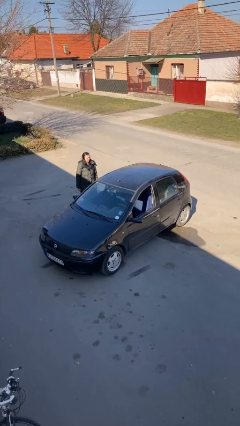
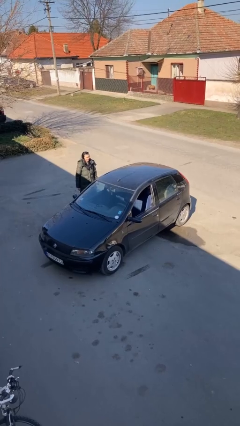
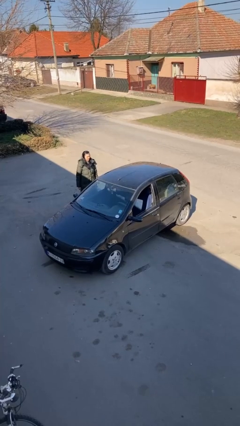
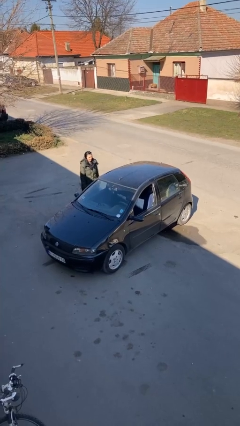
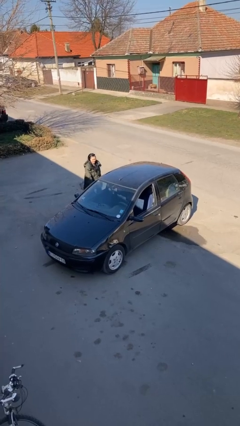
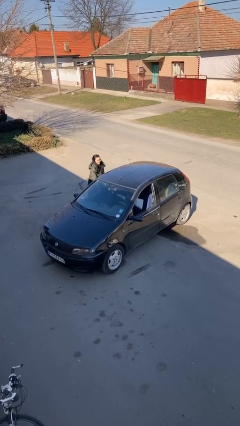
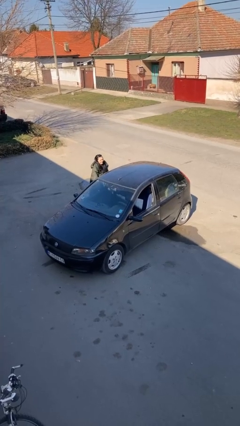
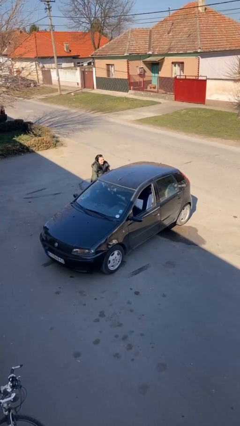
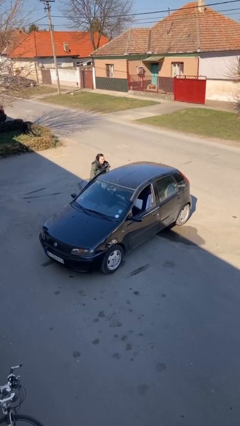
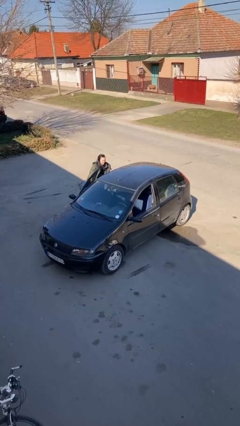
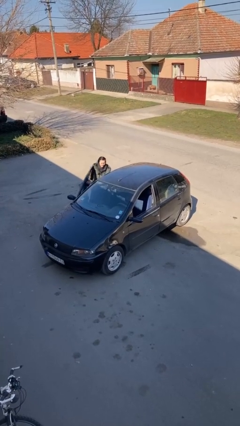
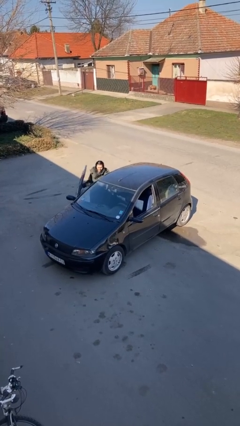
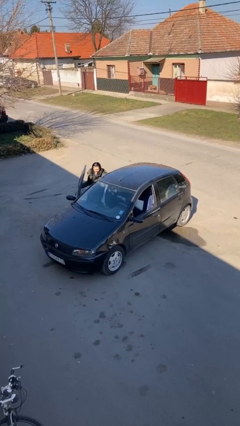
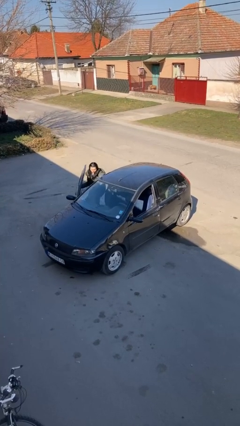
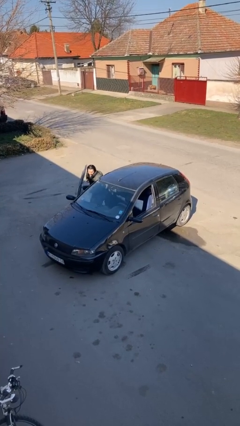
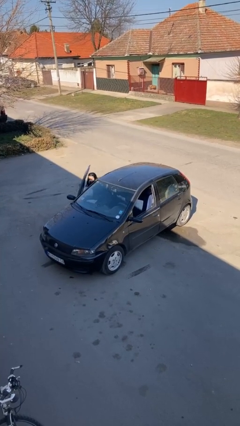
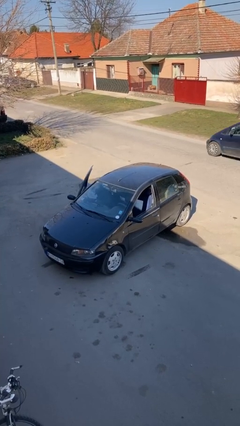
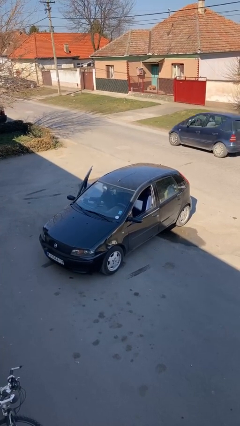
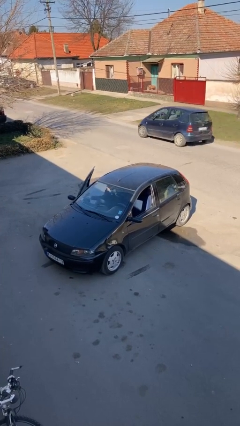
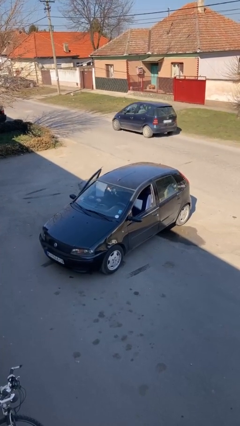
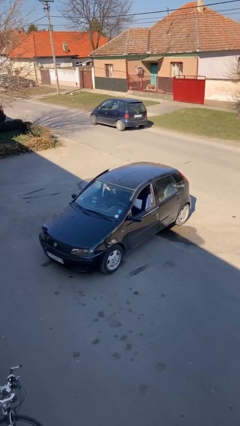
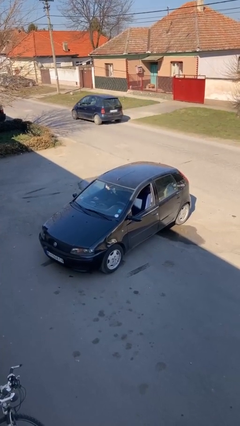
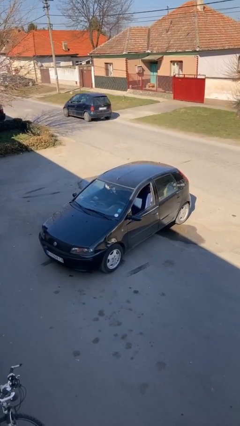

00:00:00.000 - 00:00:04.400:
car picks up person

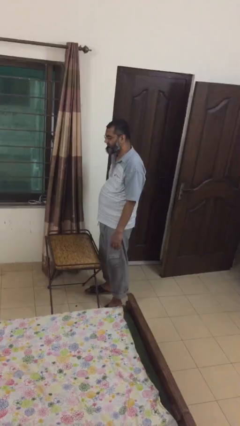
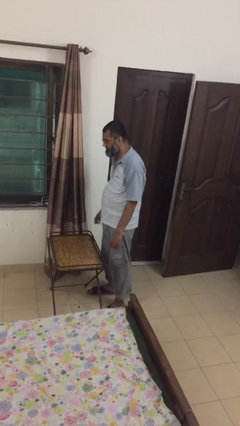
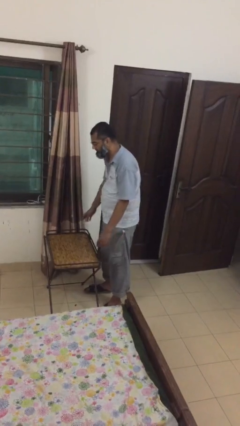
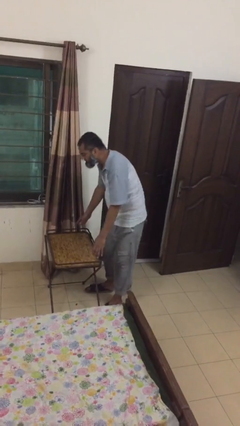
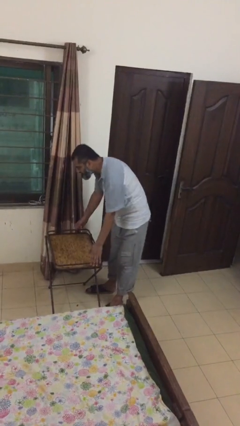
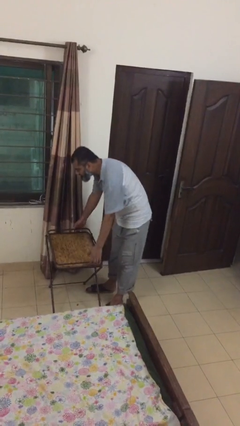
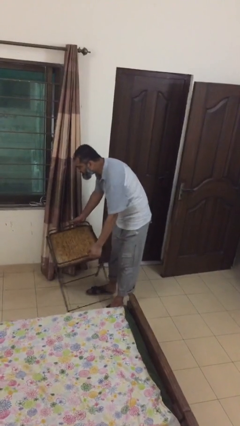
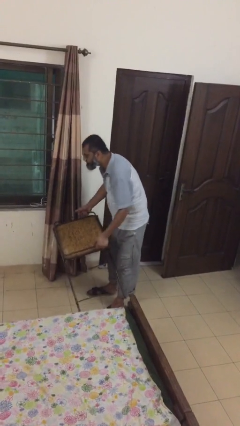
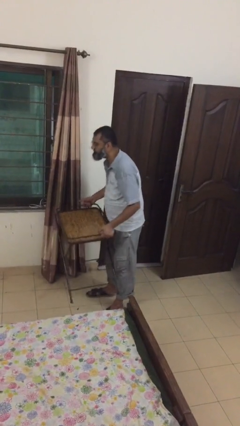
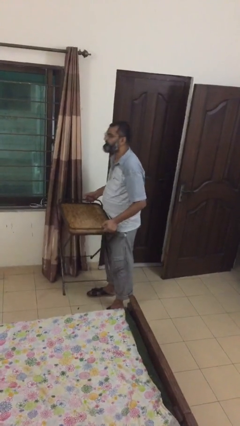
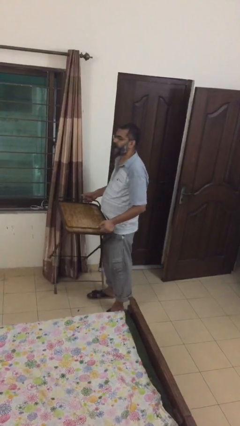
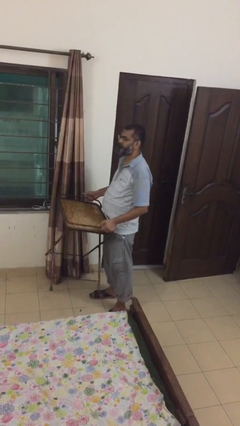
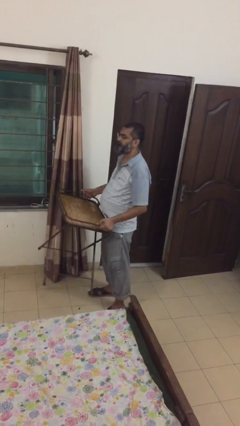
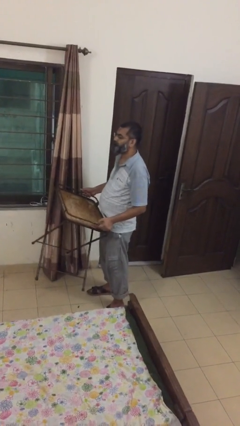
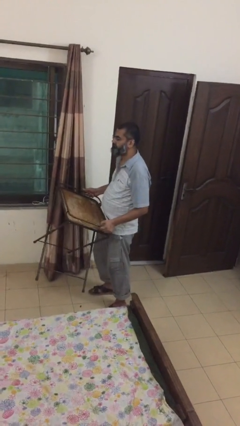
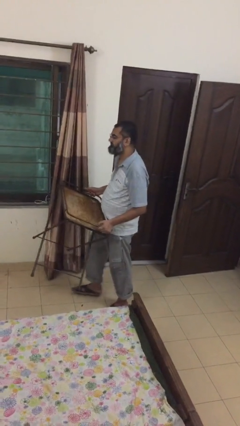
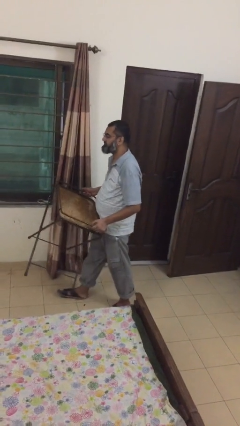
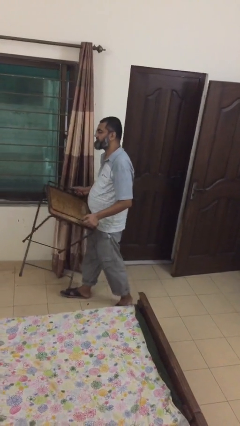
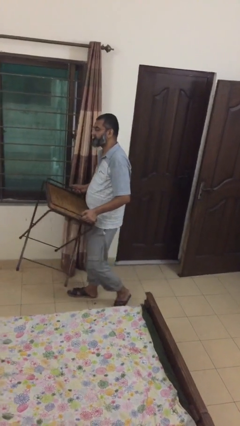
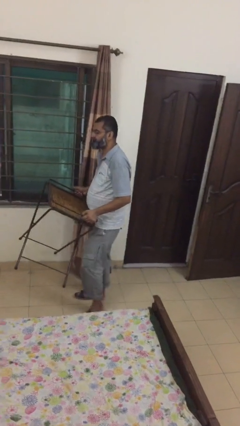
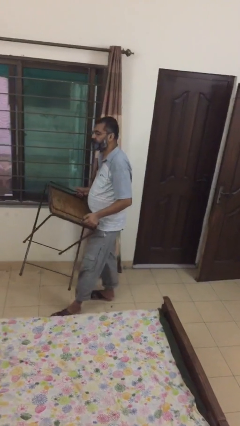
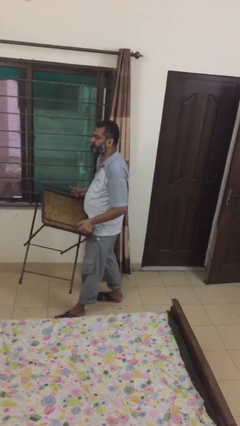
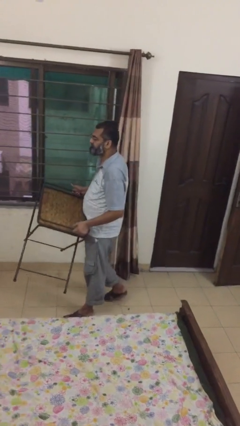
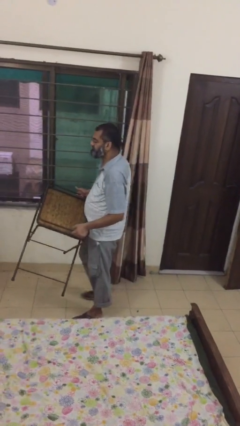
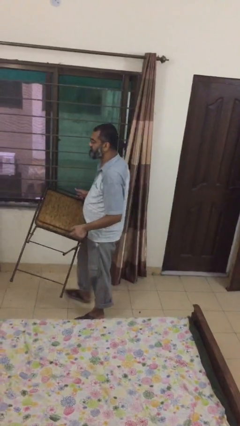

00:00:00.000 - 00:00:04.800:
person carries heavy object

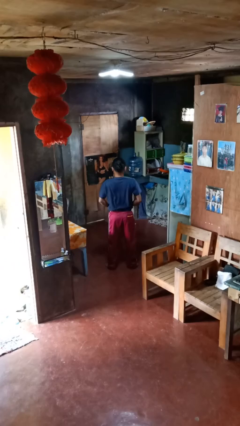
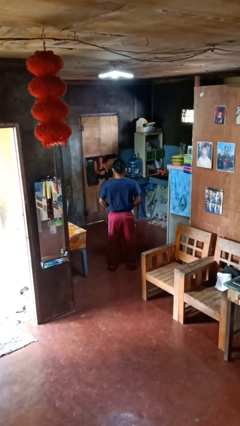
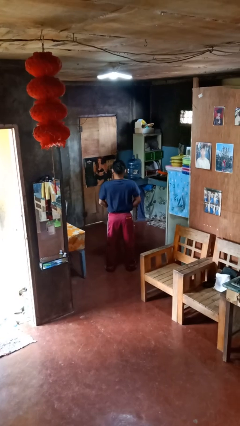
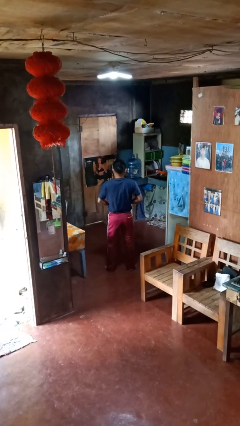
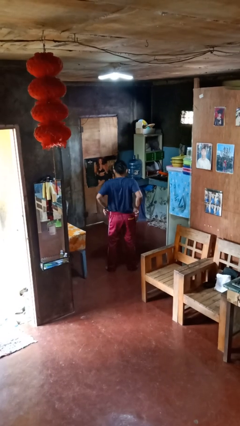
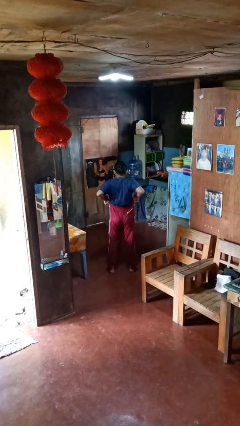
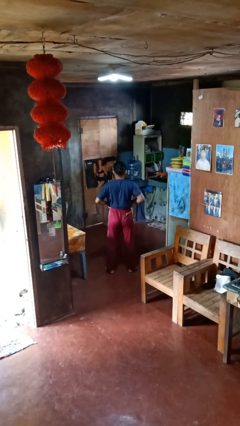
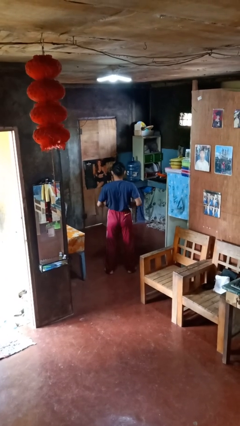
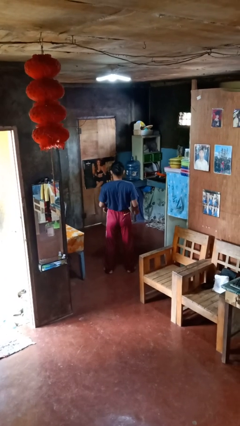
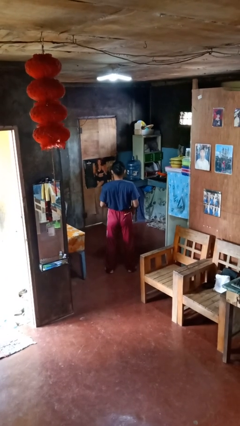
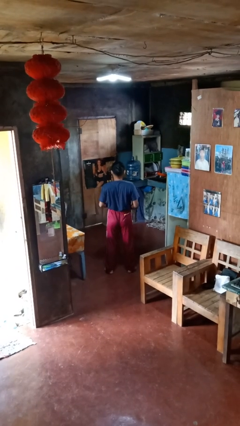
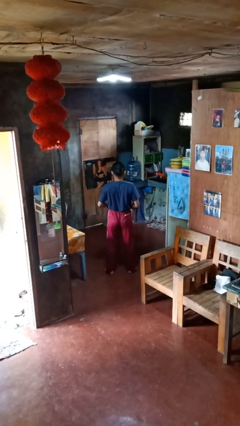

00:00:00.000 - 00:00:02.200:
person hikes up pants

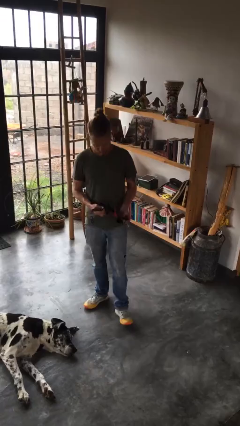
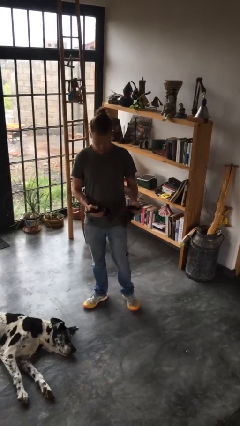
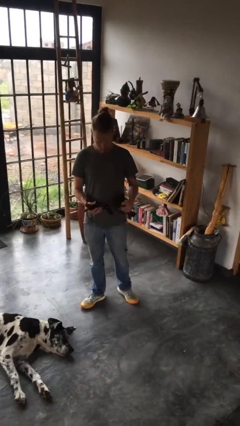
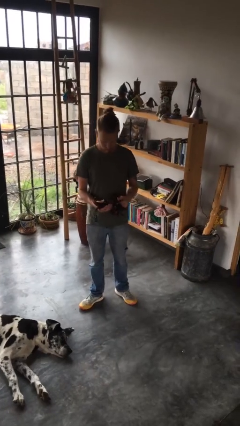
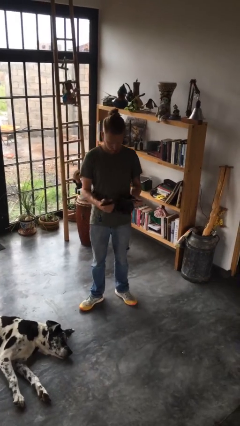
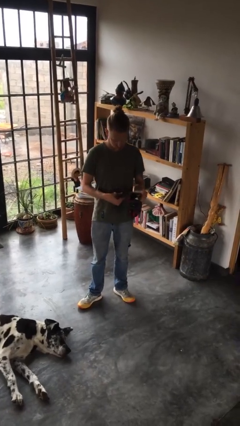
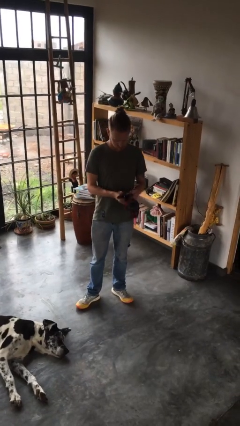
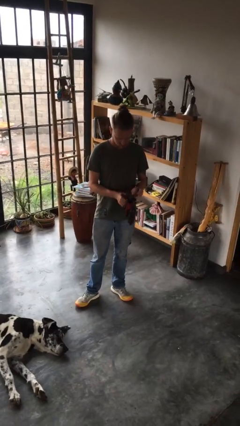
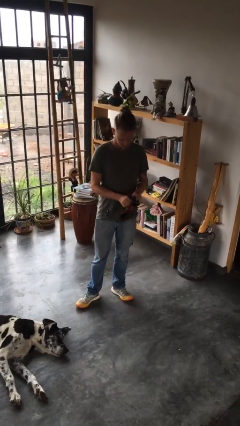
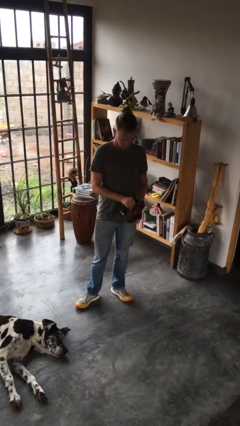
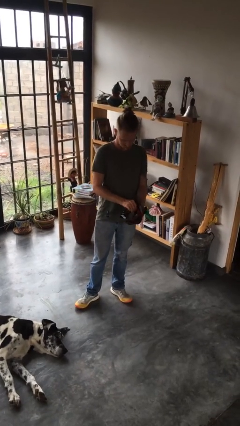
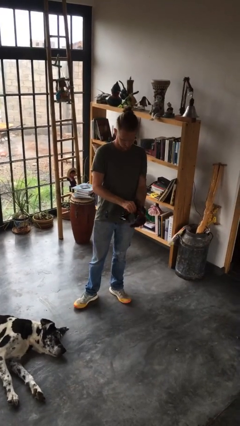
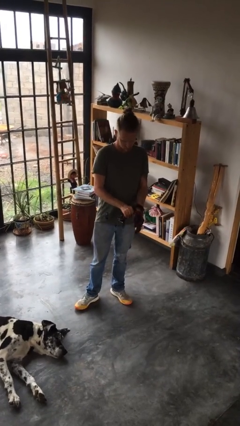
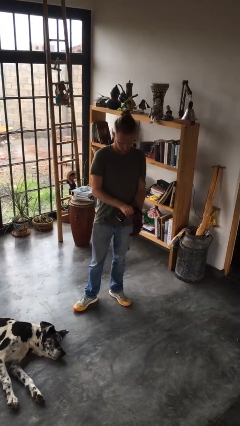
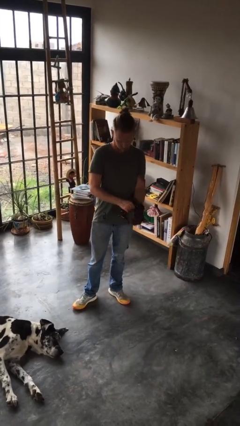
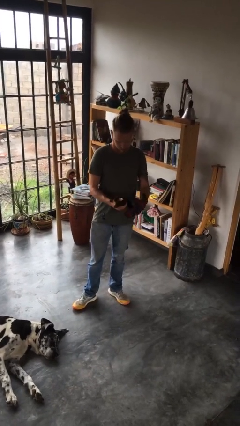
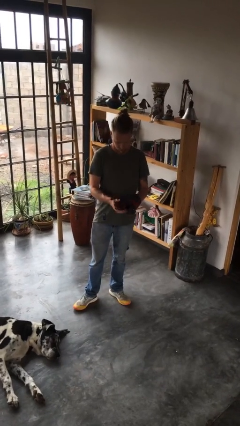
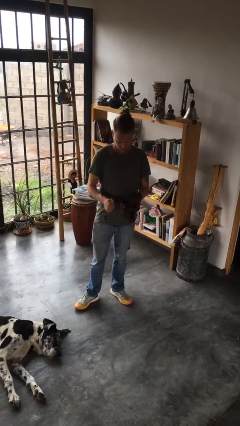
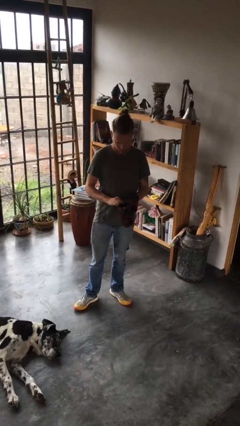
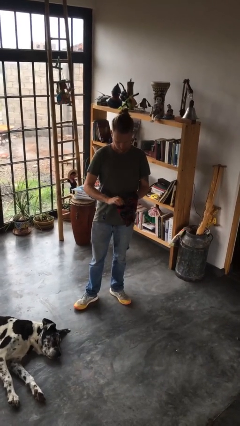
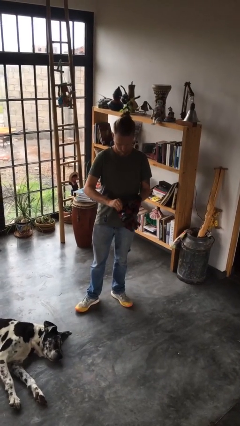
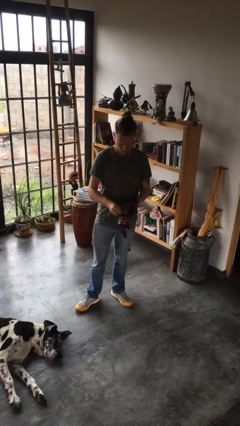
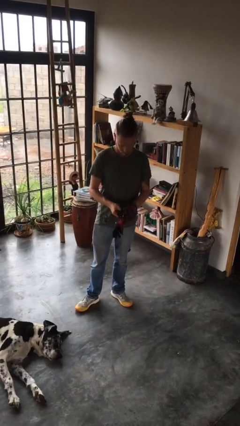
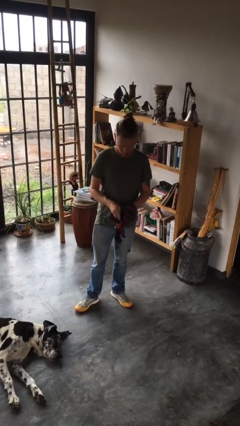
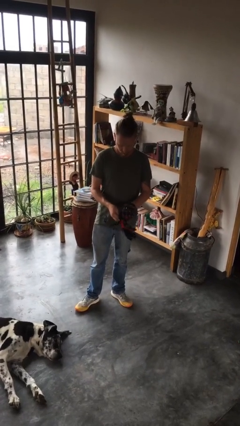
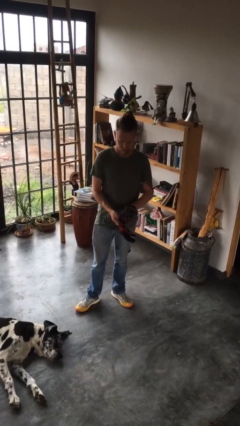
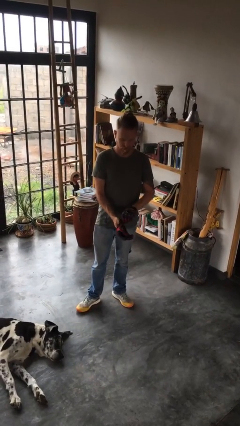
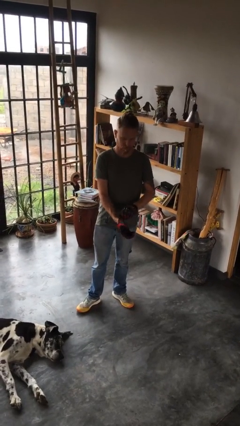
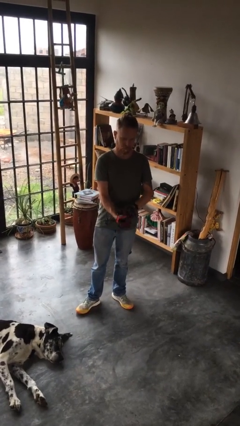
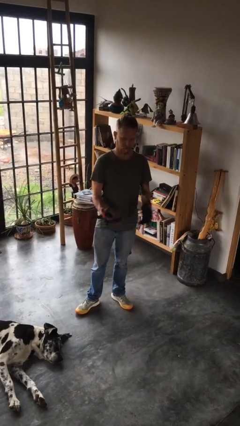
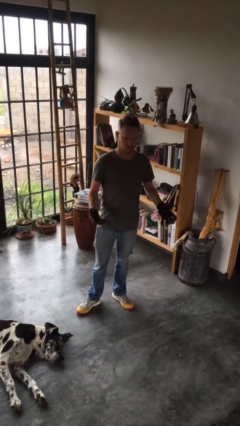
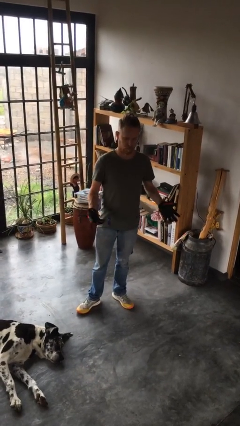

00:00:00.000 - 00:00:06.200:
person puts on gloves
